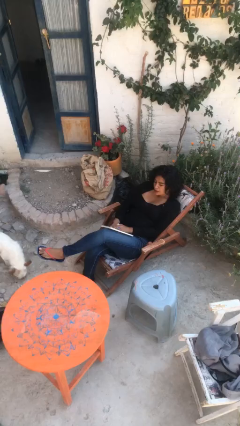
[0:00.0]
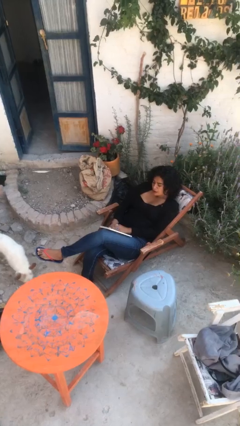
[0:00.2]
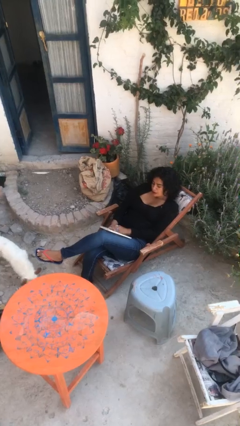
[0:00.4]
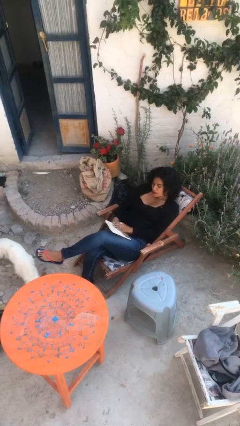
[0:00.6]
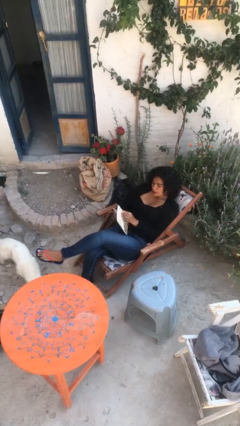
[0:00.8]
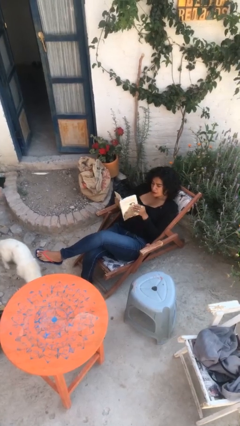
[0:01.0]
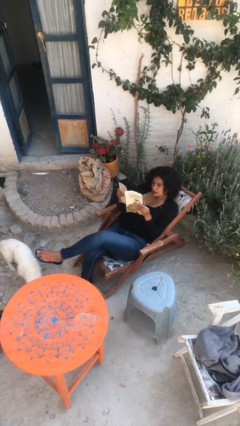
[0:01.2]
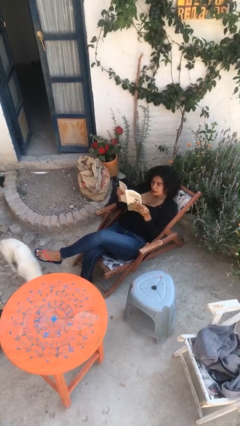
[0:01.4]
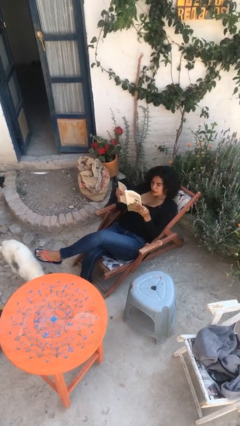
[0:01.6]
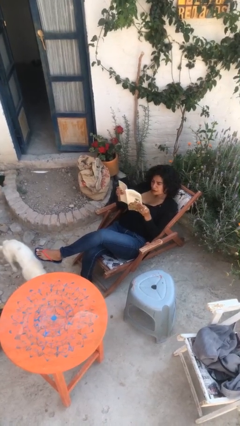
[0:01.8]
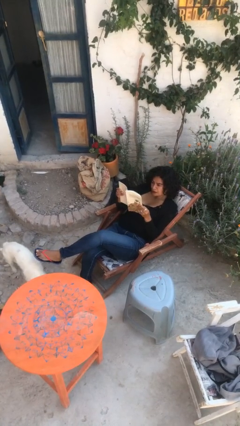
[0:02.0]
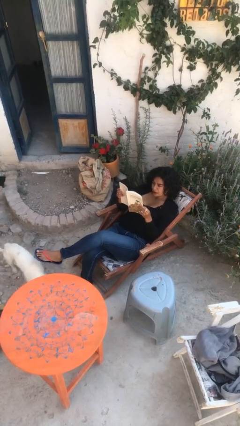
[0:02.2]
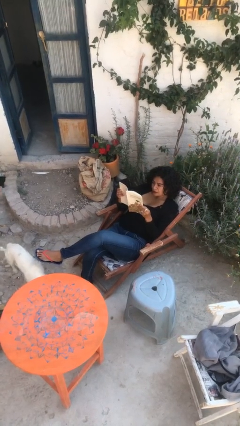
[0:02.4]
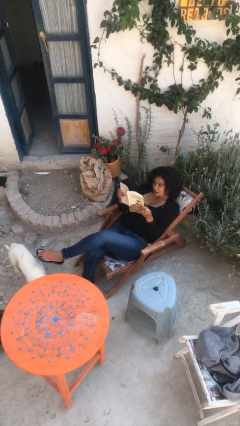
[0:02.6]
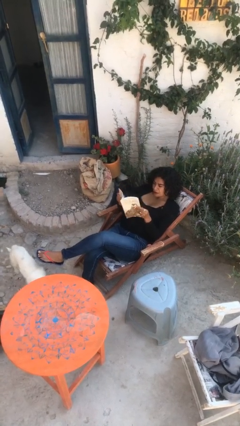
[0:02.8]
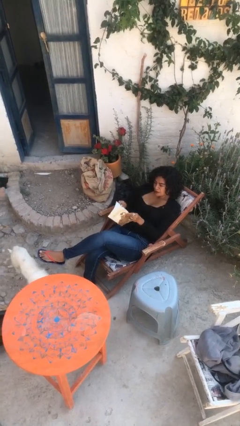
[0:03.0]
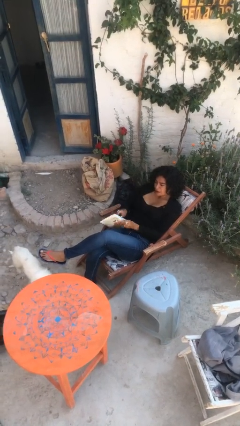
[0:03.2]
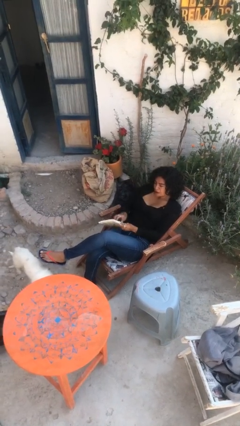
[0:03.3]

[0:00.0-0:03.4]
person reads document

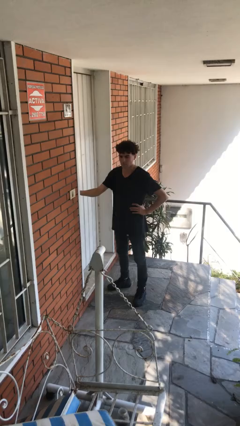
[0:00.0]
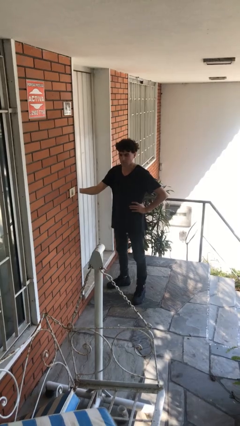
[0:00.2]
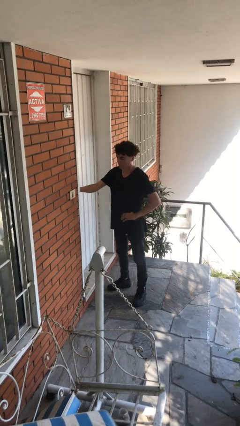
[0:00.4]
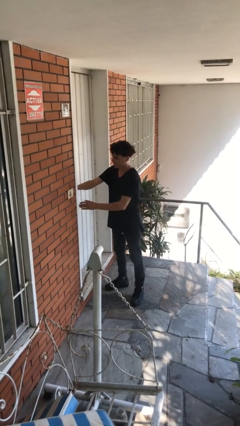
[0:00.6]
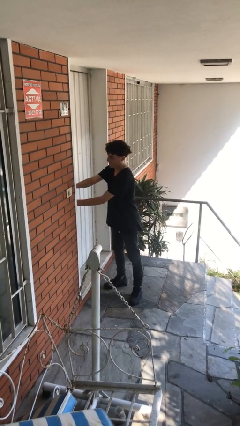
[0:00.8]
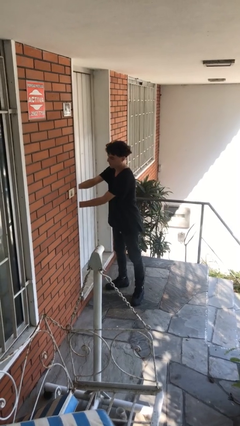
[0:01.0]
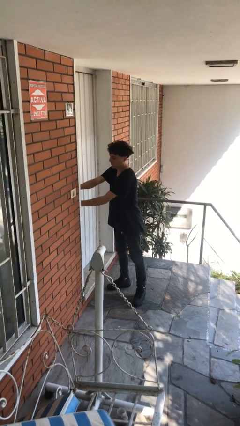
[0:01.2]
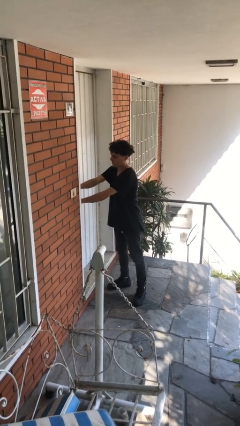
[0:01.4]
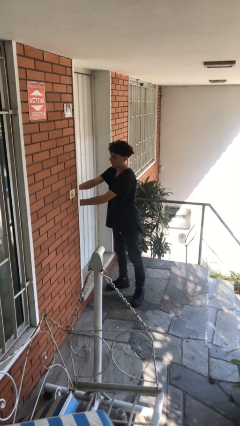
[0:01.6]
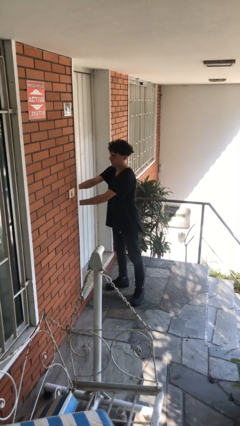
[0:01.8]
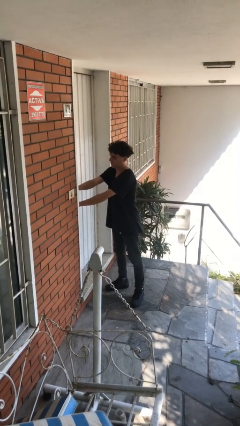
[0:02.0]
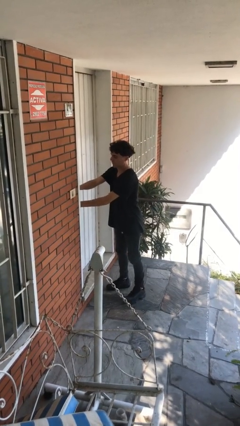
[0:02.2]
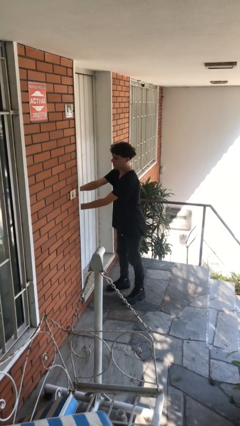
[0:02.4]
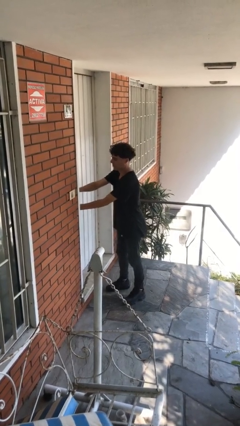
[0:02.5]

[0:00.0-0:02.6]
person unlocks door with keys

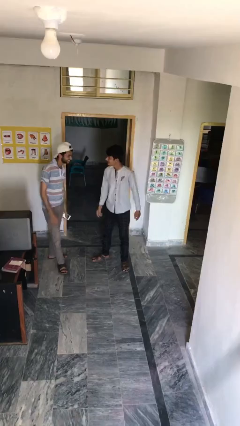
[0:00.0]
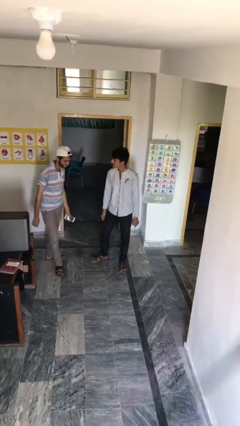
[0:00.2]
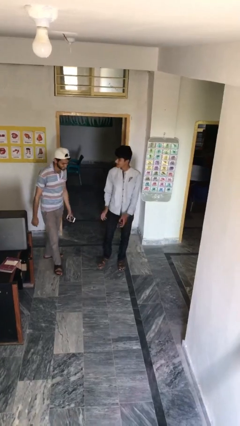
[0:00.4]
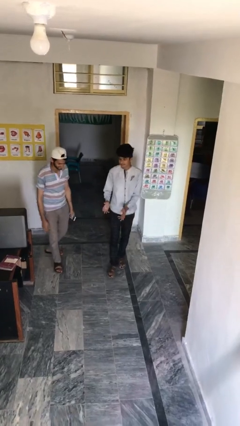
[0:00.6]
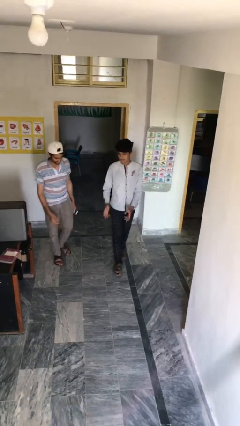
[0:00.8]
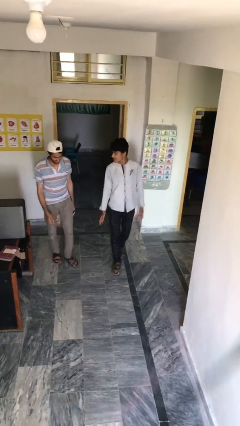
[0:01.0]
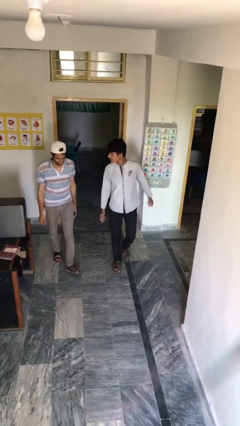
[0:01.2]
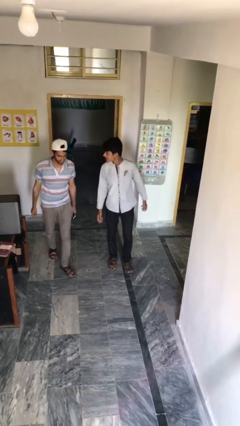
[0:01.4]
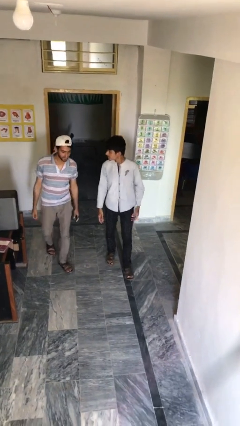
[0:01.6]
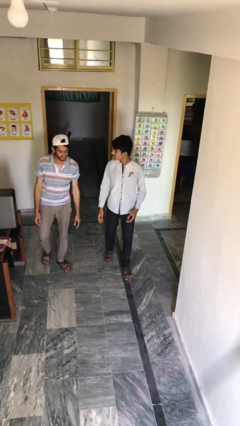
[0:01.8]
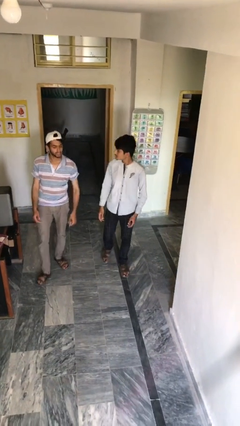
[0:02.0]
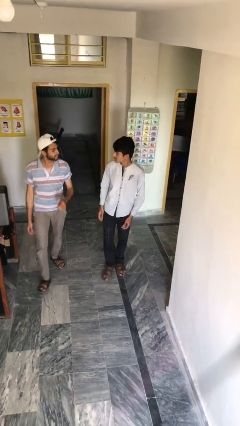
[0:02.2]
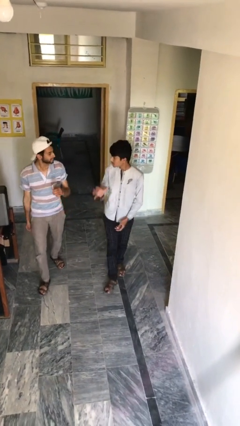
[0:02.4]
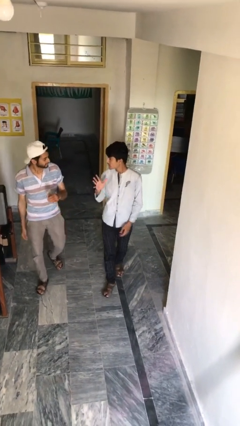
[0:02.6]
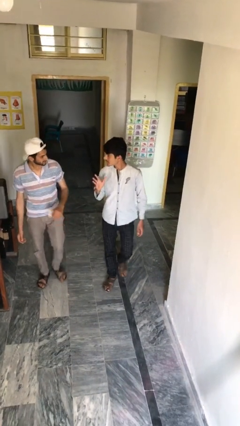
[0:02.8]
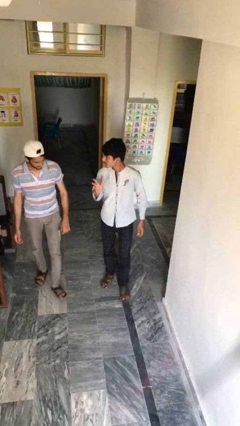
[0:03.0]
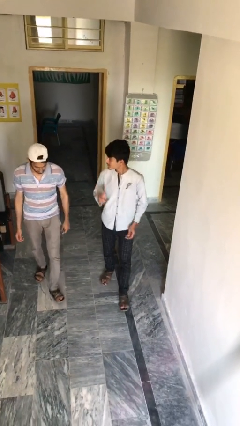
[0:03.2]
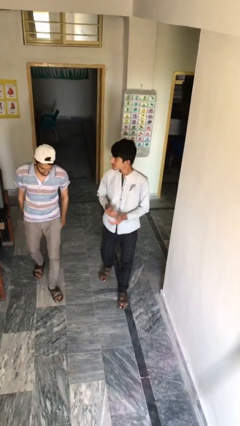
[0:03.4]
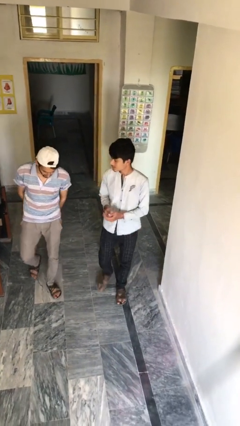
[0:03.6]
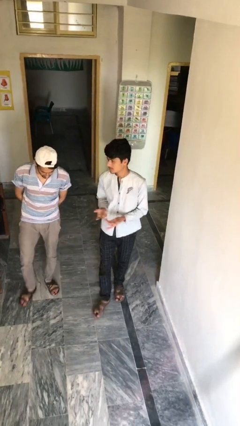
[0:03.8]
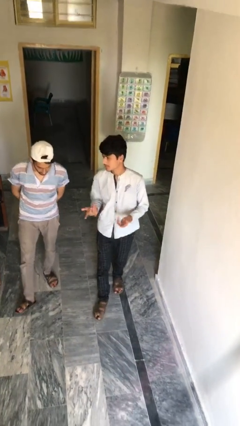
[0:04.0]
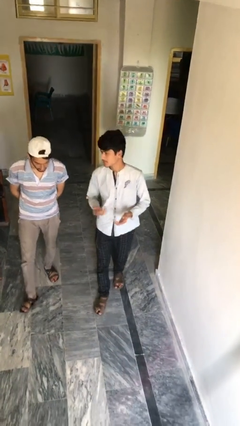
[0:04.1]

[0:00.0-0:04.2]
person talks to person

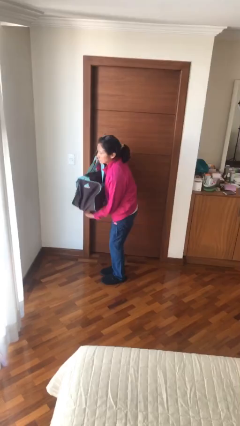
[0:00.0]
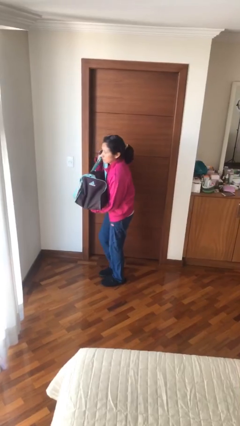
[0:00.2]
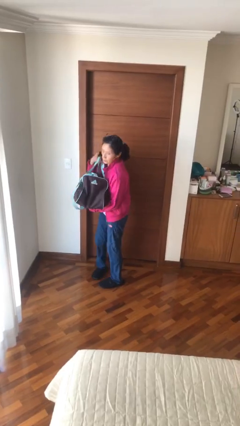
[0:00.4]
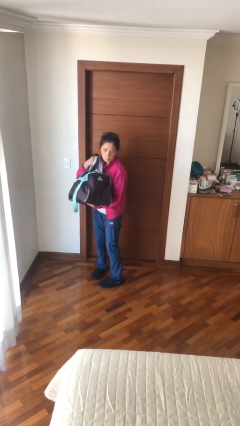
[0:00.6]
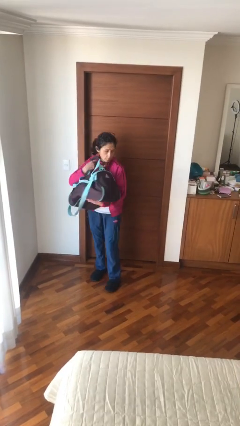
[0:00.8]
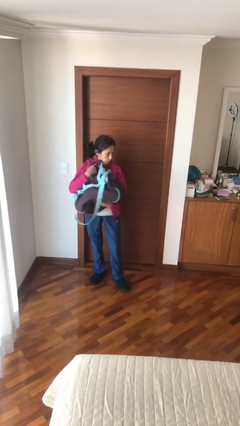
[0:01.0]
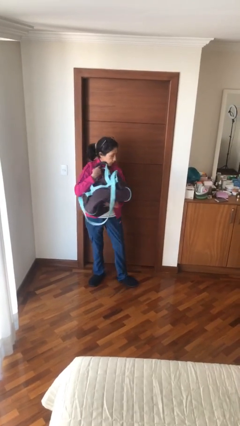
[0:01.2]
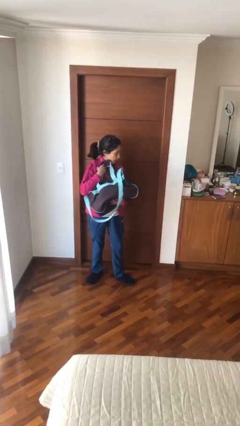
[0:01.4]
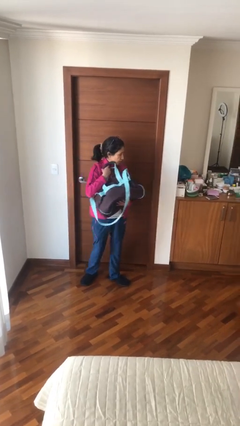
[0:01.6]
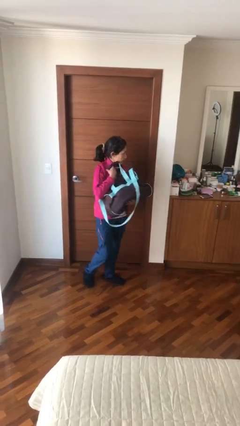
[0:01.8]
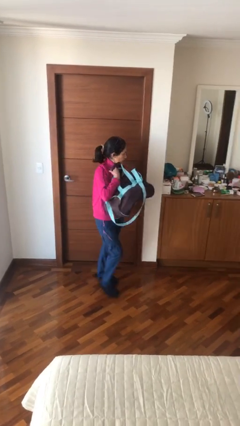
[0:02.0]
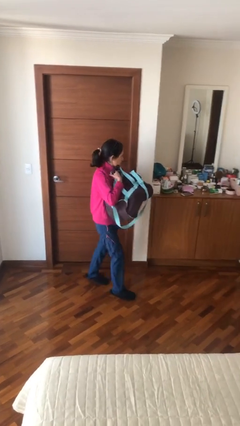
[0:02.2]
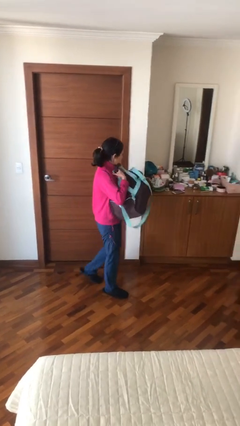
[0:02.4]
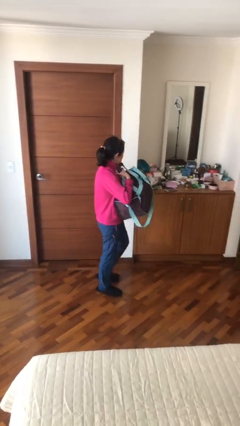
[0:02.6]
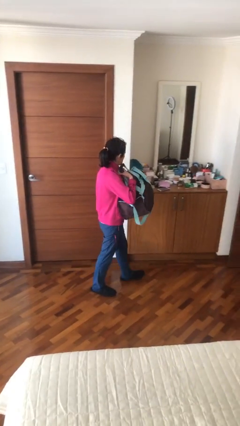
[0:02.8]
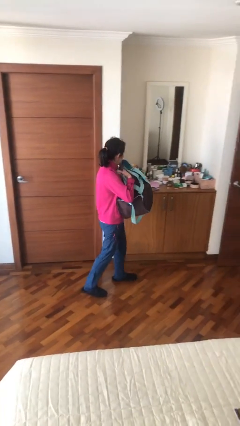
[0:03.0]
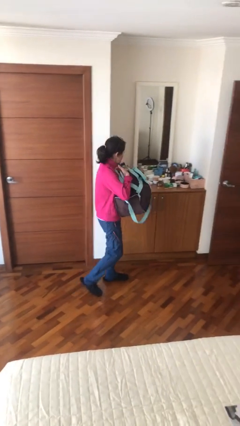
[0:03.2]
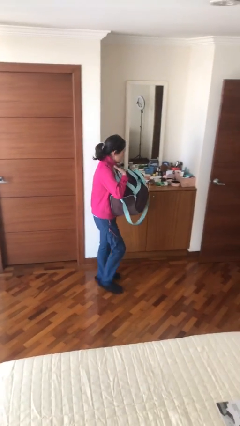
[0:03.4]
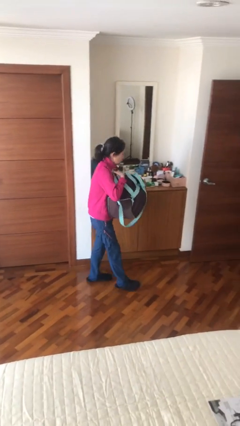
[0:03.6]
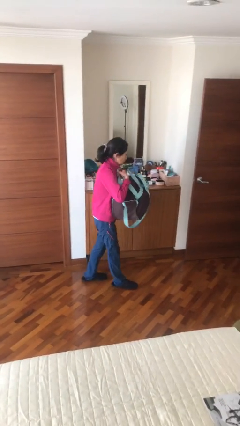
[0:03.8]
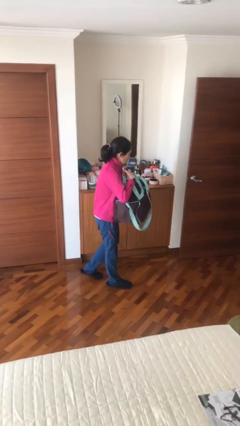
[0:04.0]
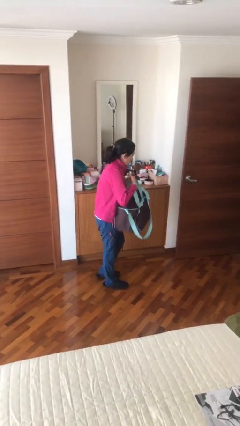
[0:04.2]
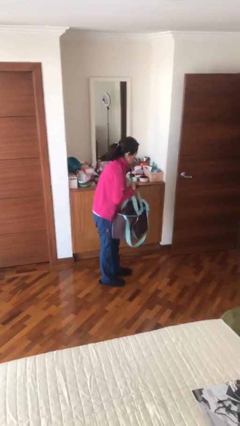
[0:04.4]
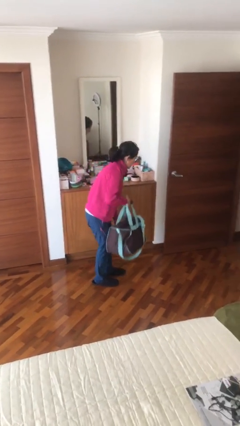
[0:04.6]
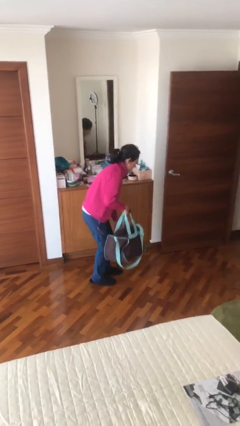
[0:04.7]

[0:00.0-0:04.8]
person carries heavy object

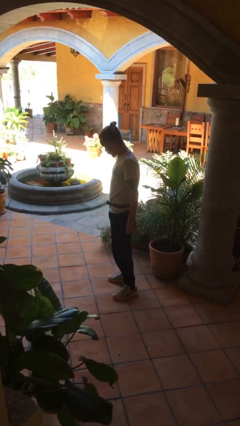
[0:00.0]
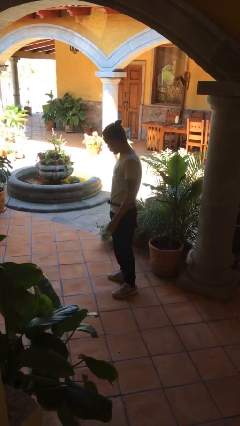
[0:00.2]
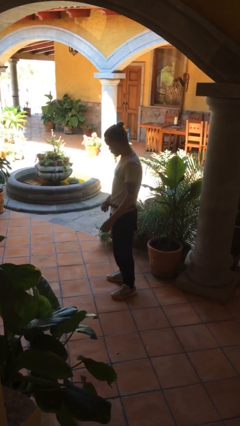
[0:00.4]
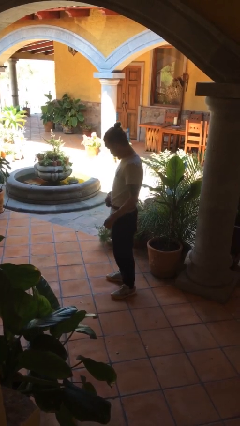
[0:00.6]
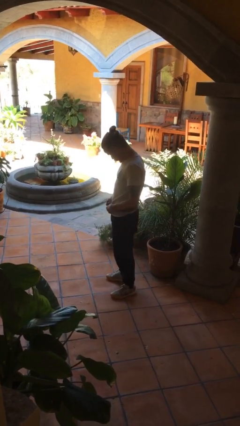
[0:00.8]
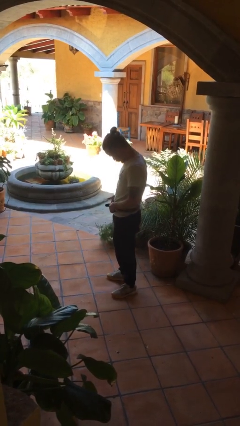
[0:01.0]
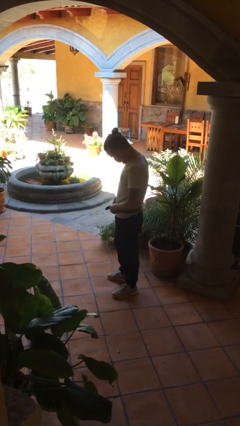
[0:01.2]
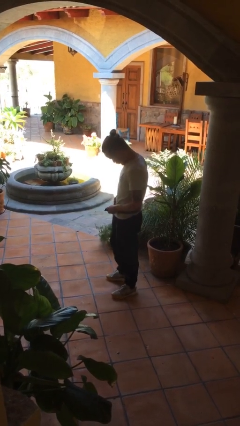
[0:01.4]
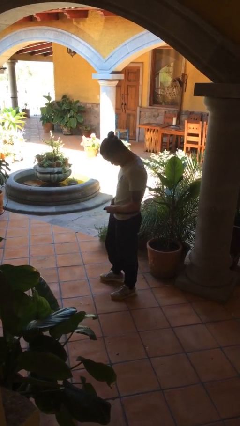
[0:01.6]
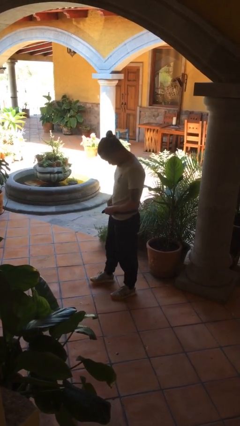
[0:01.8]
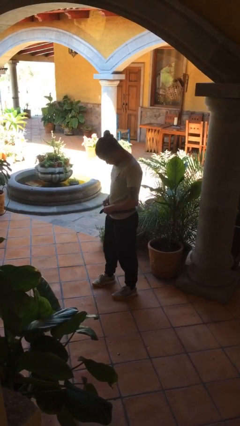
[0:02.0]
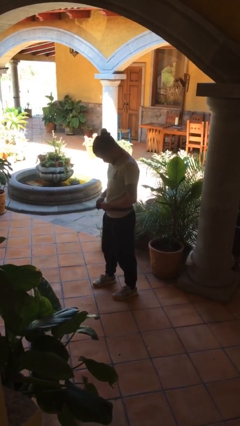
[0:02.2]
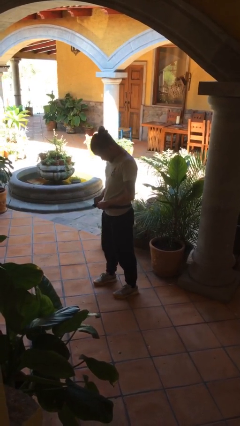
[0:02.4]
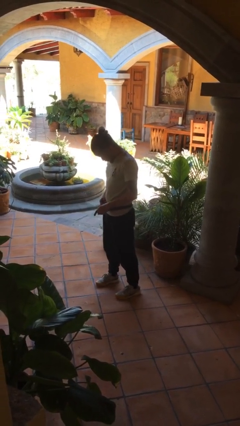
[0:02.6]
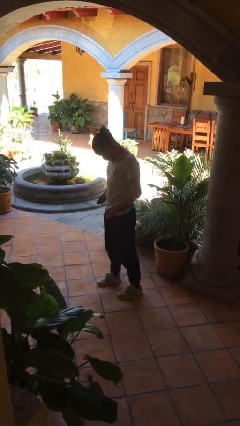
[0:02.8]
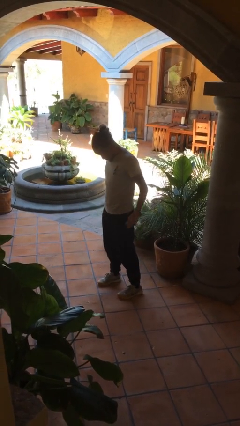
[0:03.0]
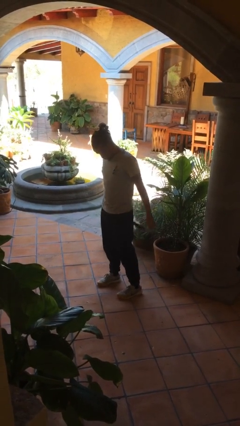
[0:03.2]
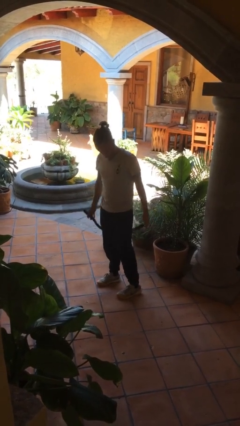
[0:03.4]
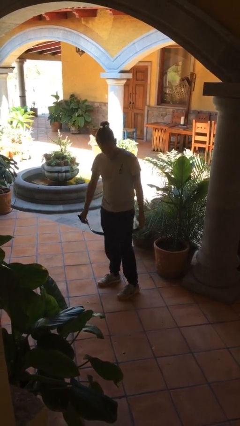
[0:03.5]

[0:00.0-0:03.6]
person takes off belt
